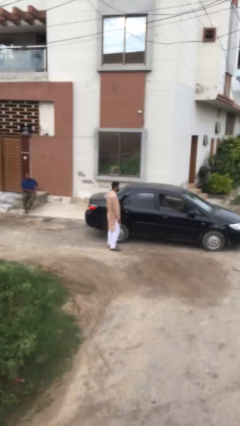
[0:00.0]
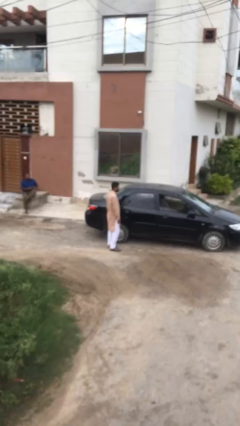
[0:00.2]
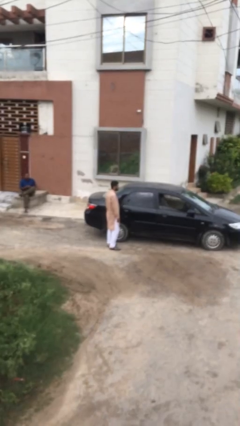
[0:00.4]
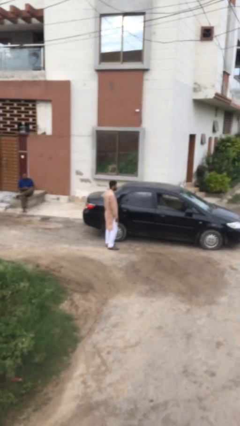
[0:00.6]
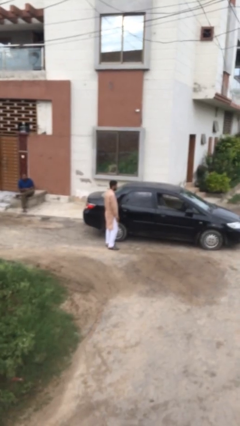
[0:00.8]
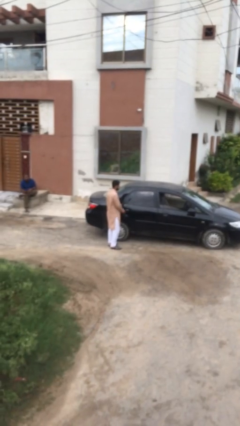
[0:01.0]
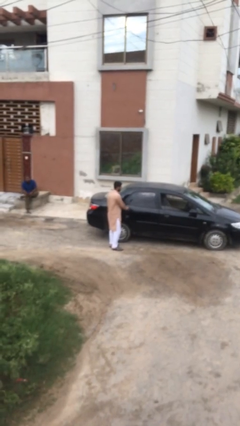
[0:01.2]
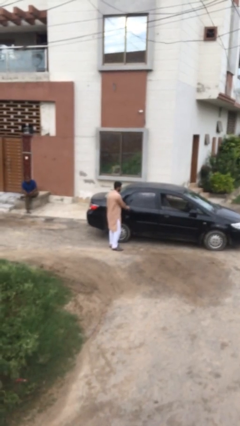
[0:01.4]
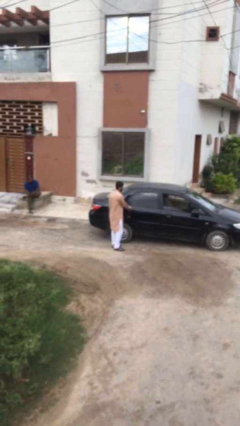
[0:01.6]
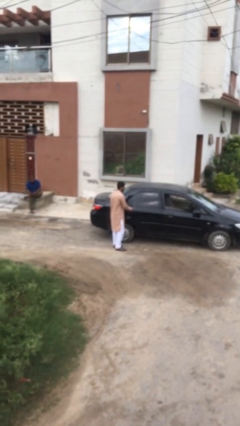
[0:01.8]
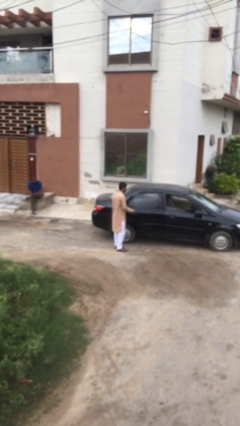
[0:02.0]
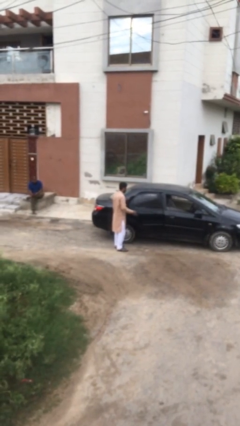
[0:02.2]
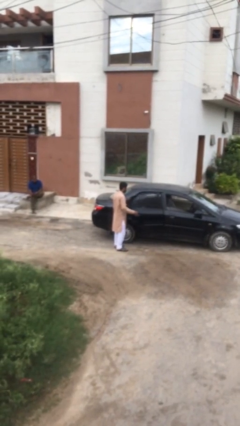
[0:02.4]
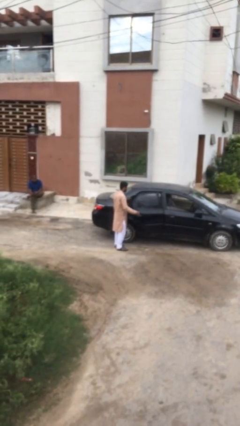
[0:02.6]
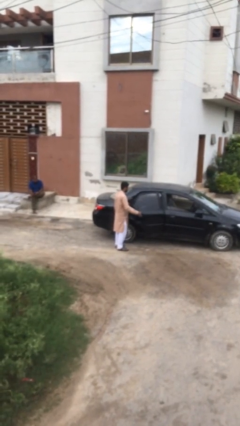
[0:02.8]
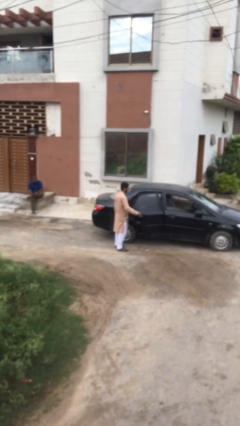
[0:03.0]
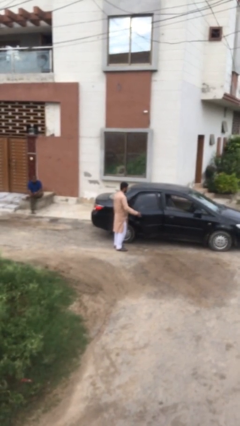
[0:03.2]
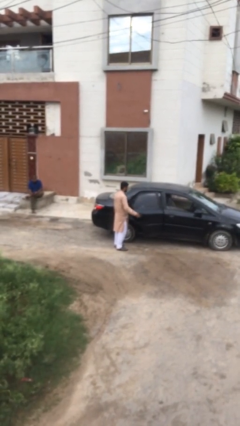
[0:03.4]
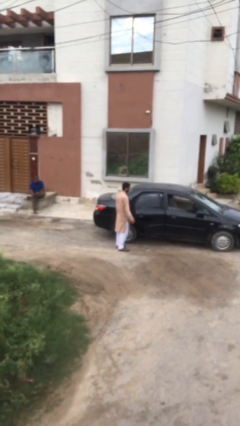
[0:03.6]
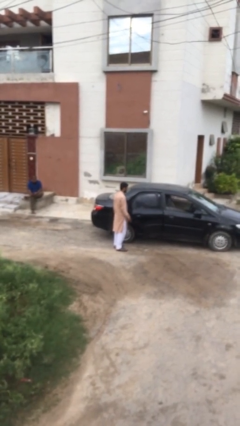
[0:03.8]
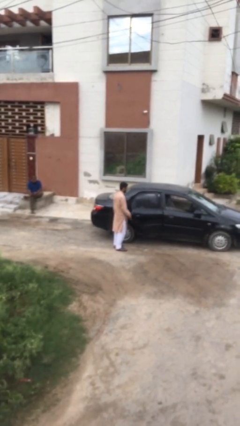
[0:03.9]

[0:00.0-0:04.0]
person opens car door

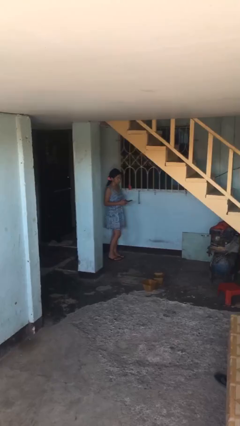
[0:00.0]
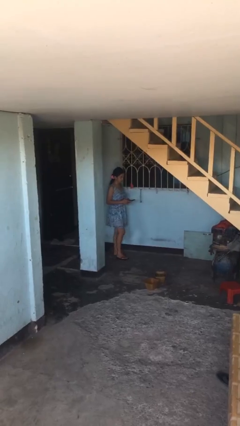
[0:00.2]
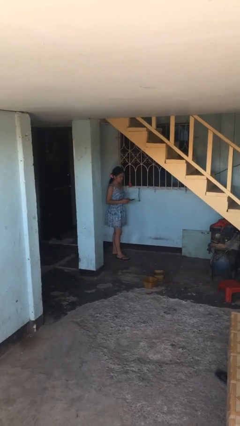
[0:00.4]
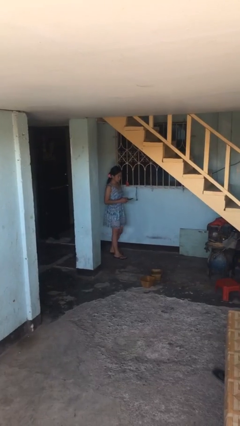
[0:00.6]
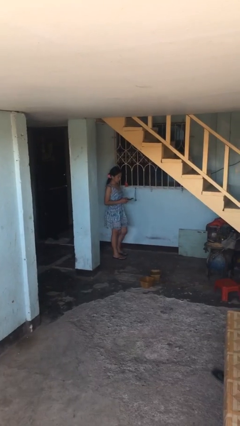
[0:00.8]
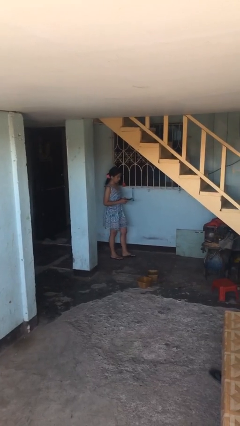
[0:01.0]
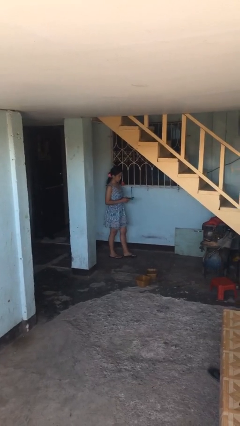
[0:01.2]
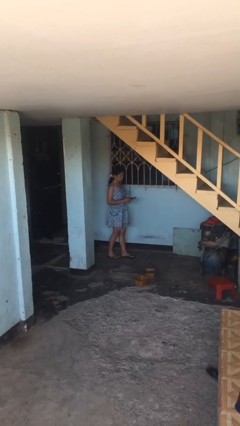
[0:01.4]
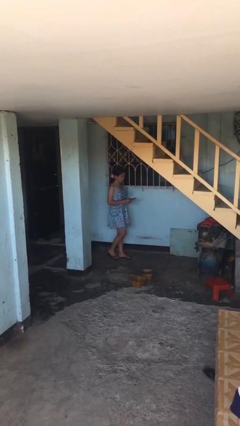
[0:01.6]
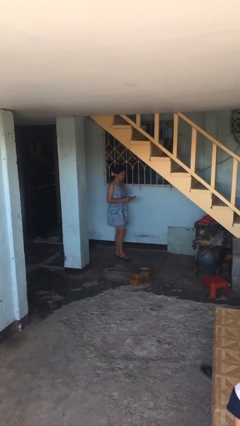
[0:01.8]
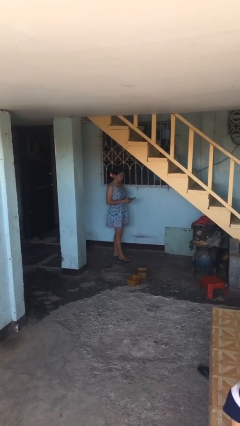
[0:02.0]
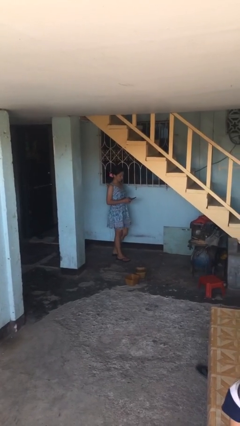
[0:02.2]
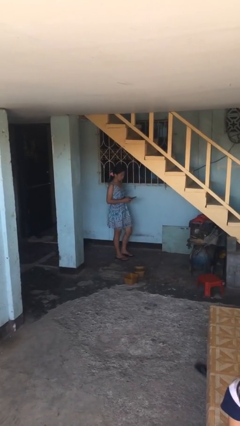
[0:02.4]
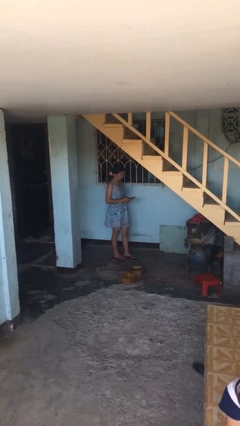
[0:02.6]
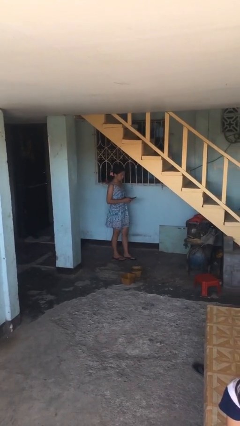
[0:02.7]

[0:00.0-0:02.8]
person texts on phone

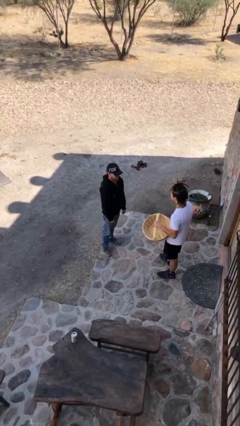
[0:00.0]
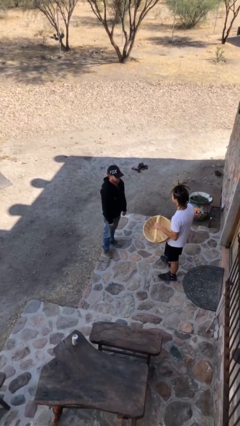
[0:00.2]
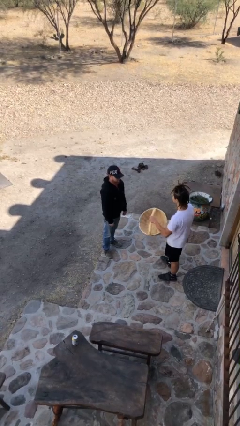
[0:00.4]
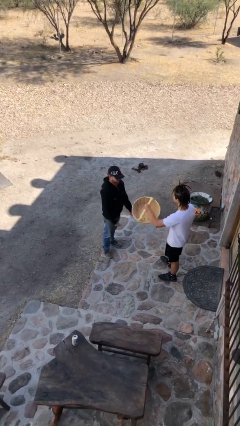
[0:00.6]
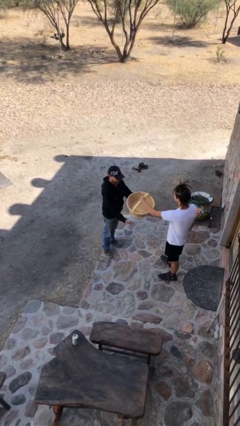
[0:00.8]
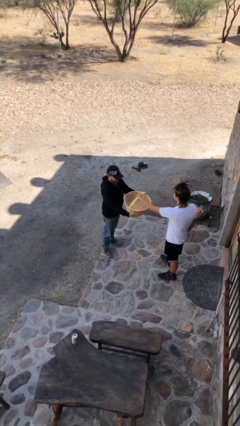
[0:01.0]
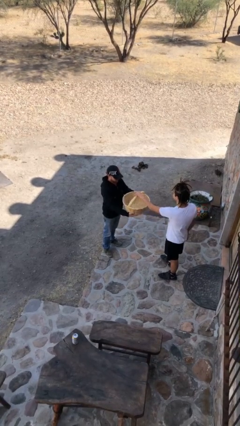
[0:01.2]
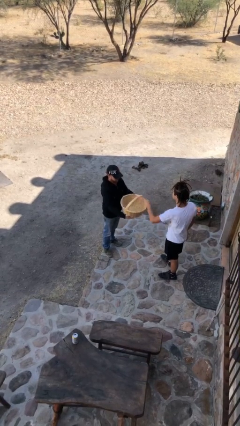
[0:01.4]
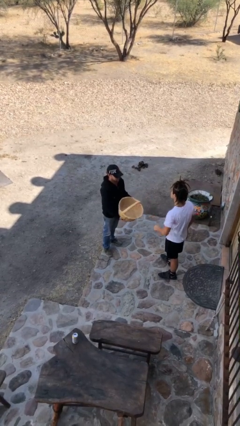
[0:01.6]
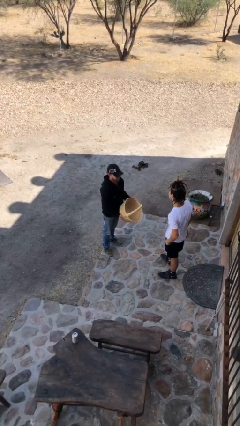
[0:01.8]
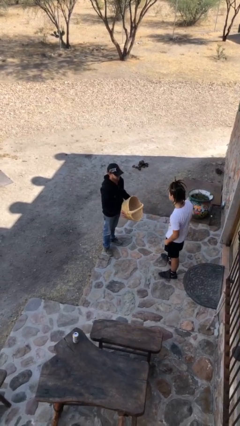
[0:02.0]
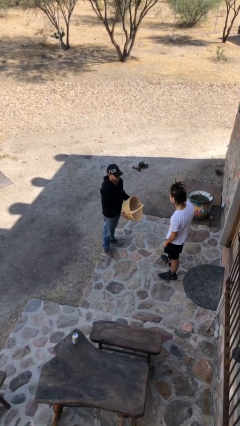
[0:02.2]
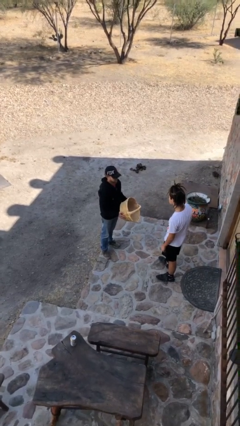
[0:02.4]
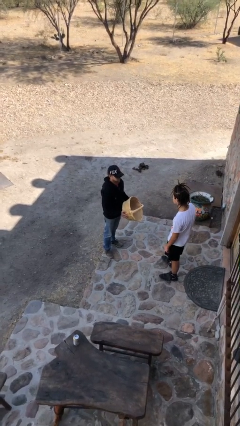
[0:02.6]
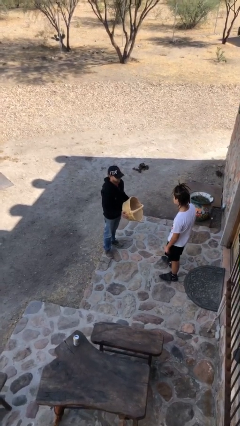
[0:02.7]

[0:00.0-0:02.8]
person transfers object to person

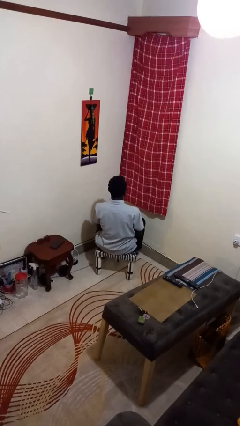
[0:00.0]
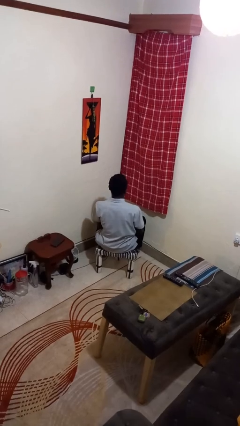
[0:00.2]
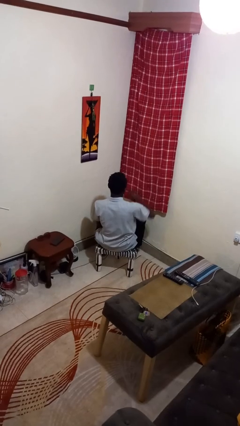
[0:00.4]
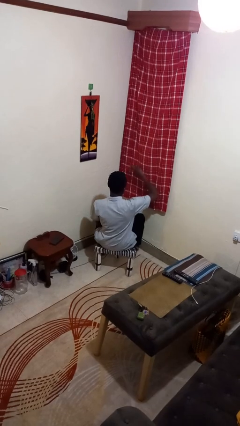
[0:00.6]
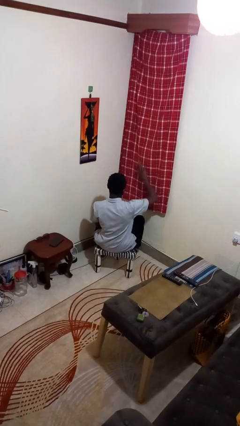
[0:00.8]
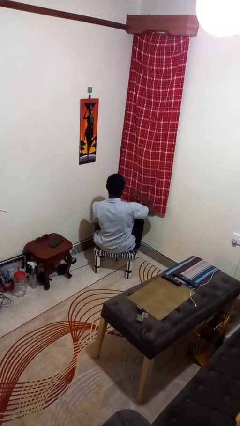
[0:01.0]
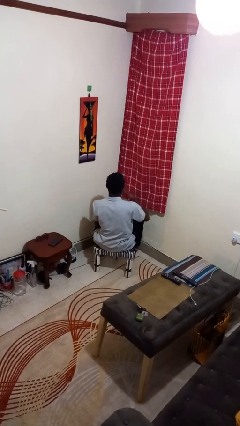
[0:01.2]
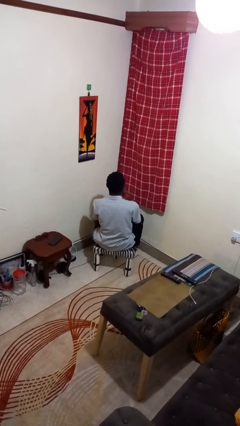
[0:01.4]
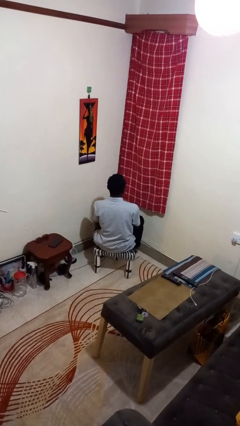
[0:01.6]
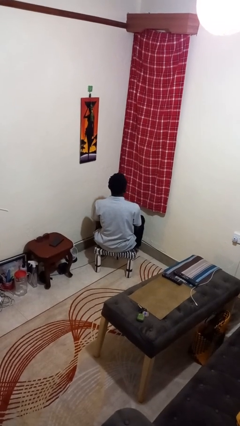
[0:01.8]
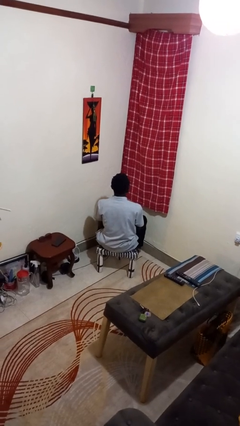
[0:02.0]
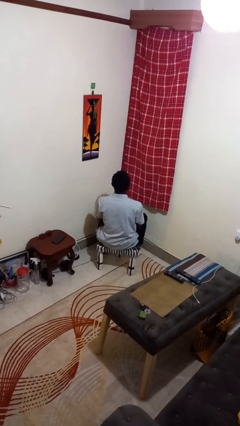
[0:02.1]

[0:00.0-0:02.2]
person gestures swipe down

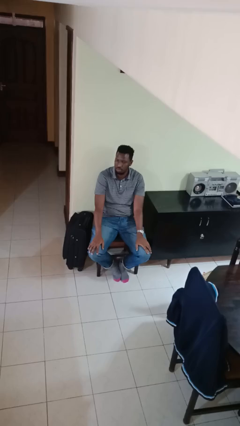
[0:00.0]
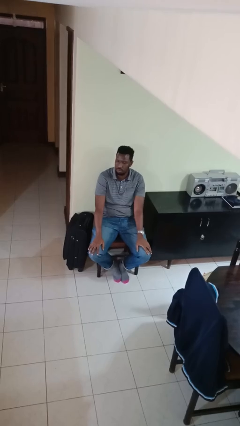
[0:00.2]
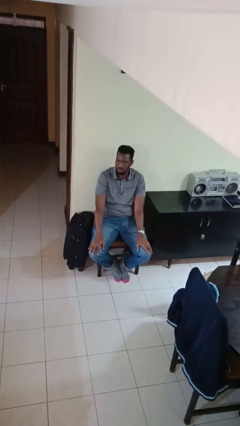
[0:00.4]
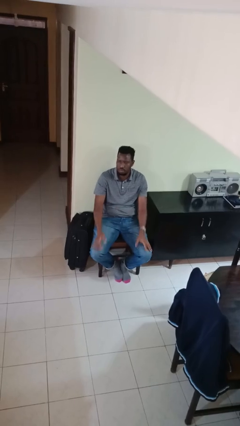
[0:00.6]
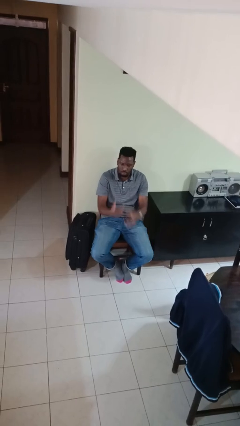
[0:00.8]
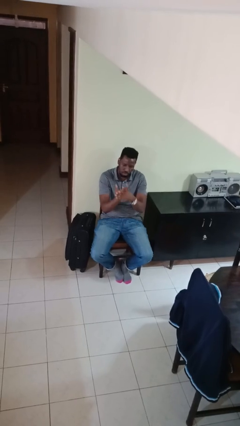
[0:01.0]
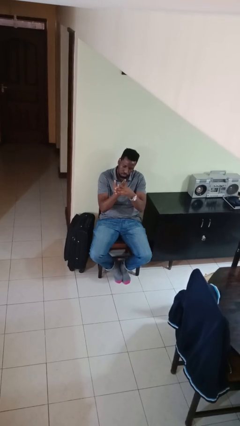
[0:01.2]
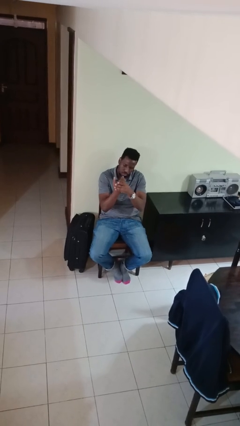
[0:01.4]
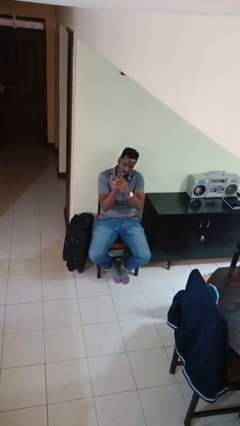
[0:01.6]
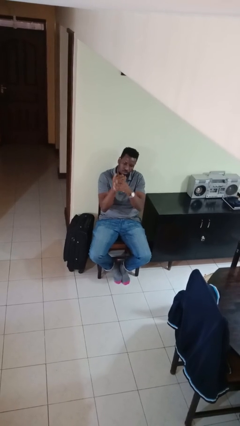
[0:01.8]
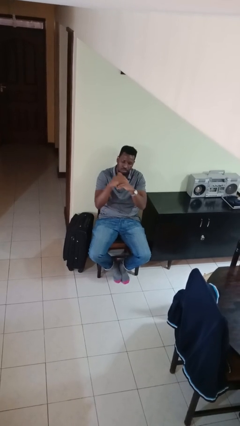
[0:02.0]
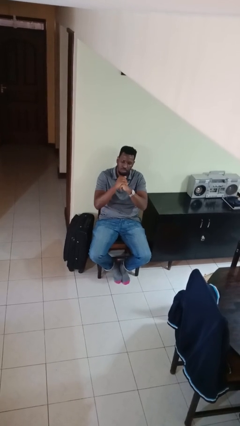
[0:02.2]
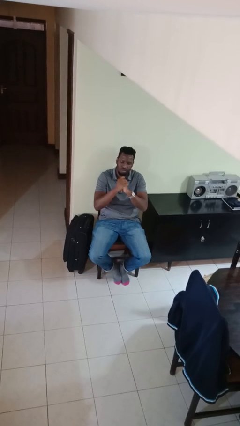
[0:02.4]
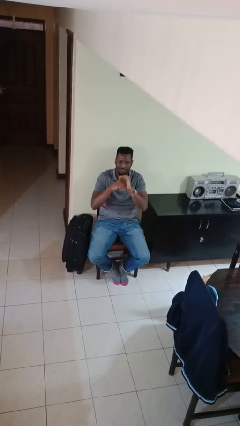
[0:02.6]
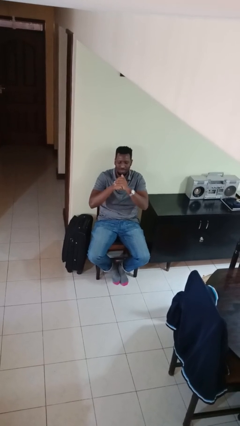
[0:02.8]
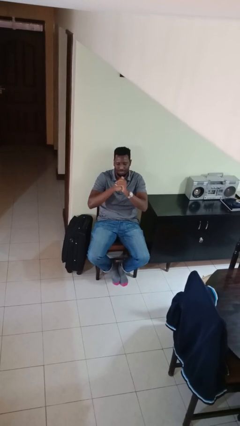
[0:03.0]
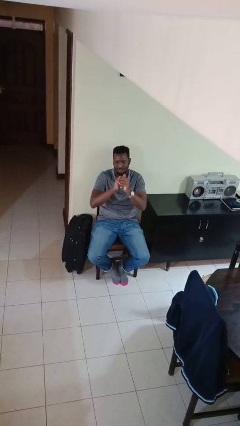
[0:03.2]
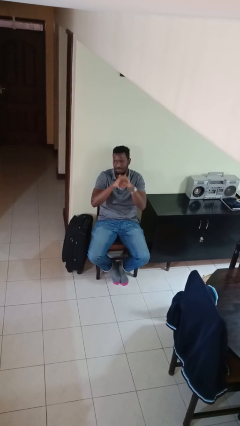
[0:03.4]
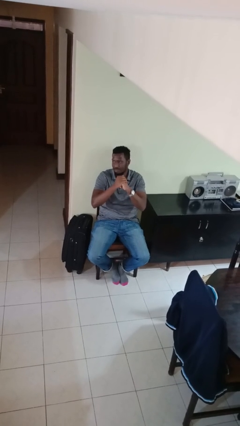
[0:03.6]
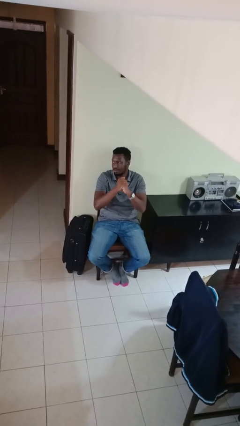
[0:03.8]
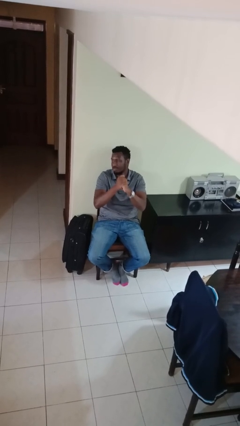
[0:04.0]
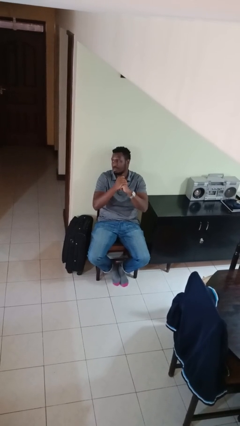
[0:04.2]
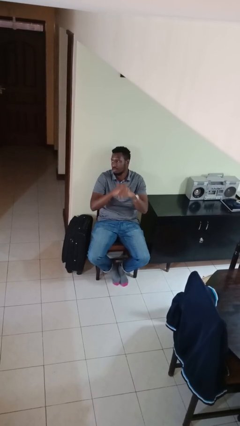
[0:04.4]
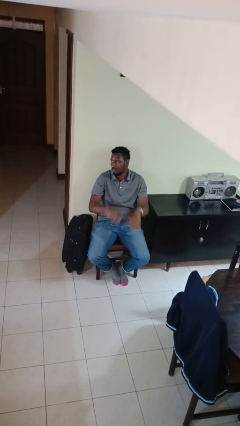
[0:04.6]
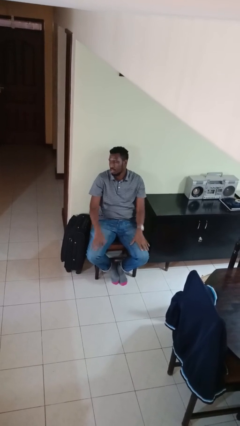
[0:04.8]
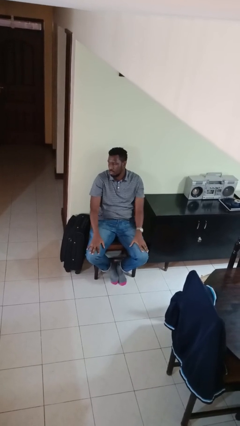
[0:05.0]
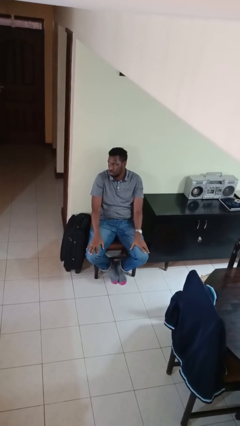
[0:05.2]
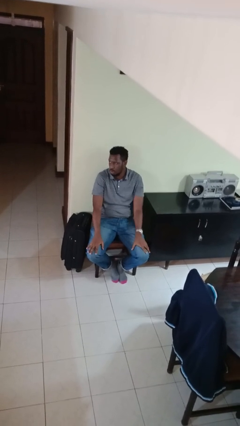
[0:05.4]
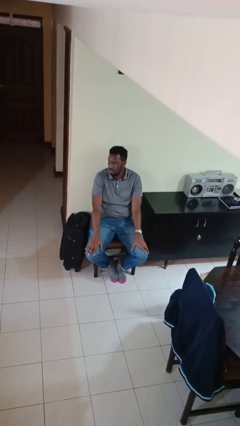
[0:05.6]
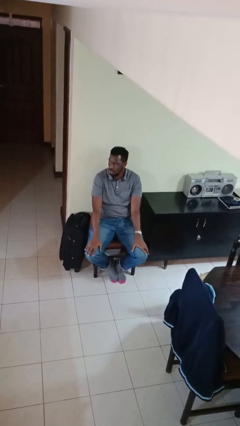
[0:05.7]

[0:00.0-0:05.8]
person cracks knuckles
